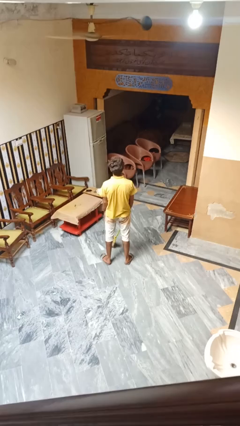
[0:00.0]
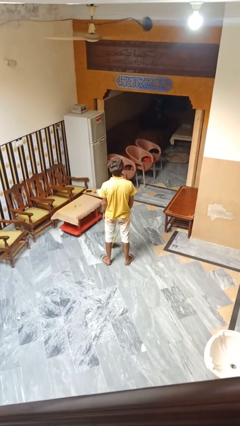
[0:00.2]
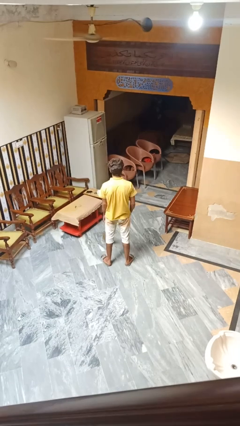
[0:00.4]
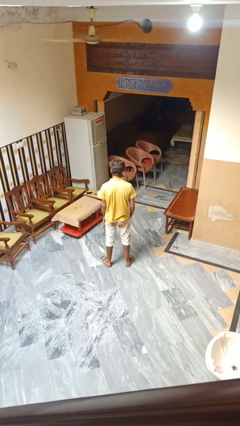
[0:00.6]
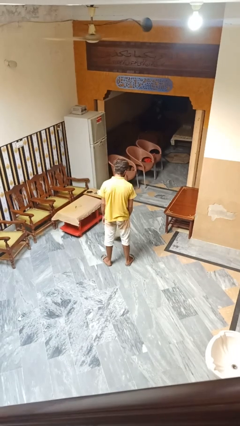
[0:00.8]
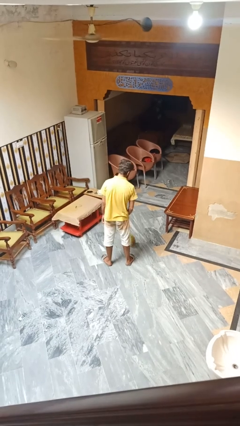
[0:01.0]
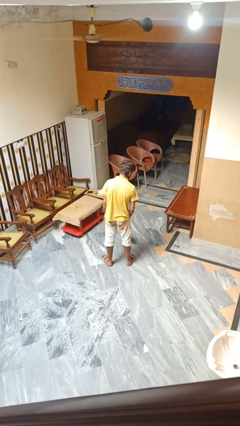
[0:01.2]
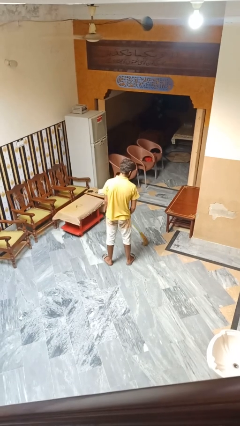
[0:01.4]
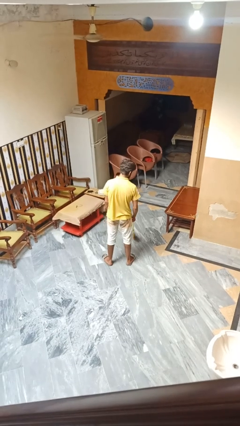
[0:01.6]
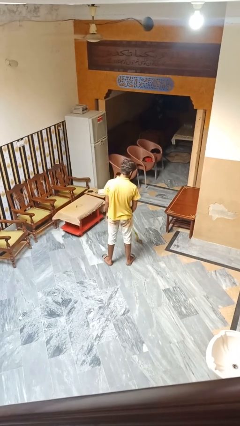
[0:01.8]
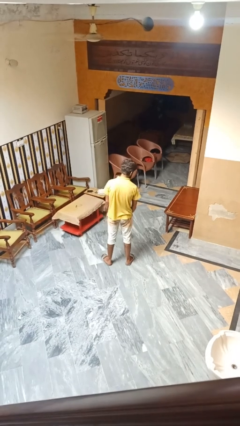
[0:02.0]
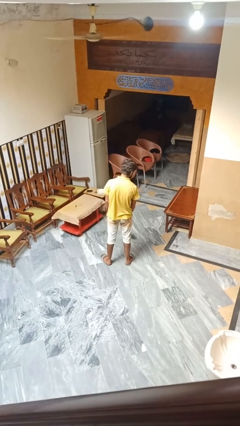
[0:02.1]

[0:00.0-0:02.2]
person mops

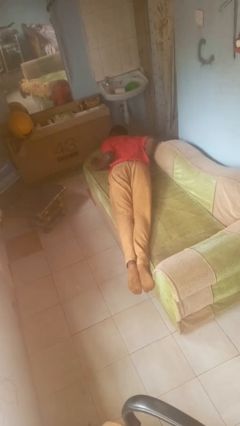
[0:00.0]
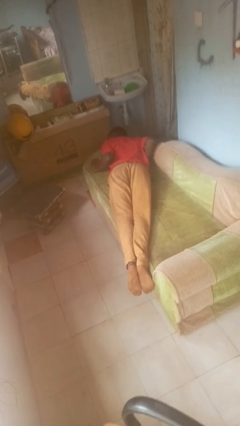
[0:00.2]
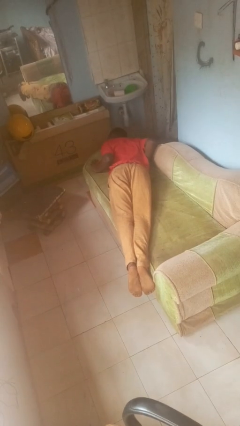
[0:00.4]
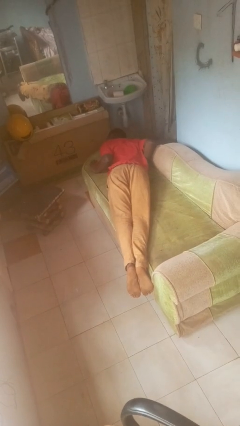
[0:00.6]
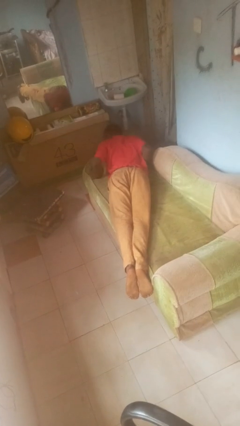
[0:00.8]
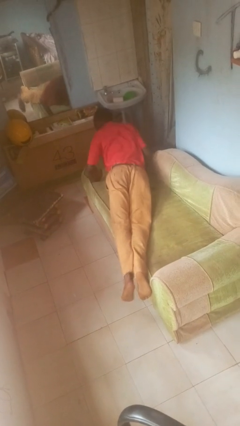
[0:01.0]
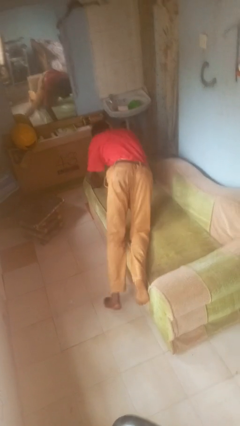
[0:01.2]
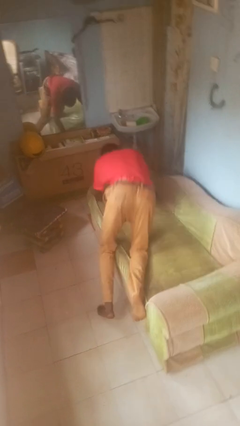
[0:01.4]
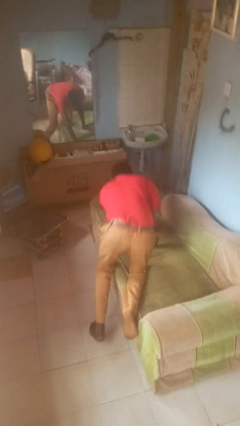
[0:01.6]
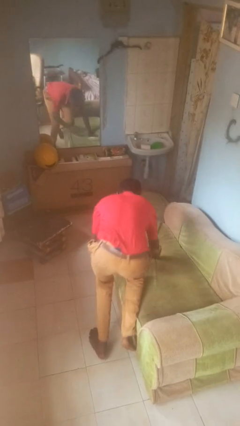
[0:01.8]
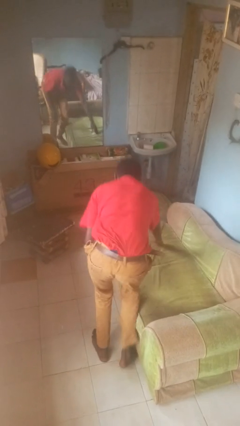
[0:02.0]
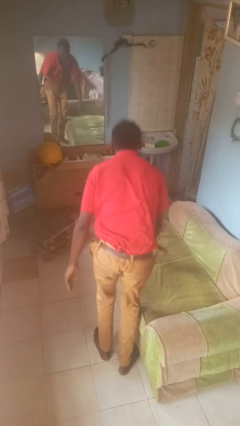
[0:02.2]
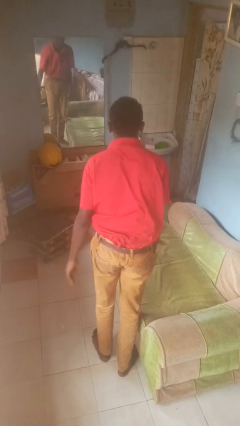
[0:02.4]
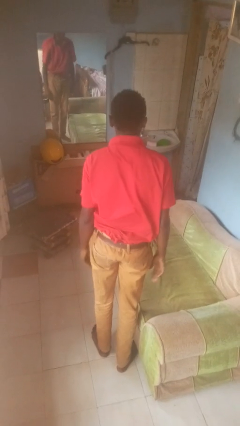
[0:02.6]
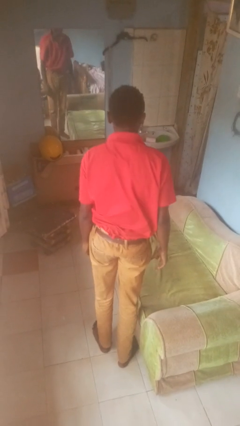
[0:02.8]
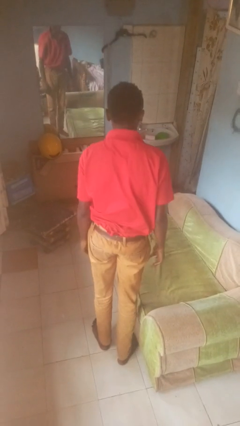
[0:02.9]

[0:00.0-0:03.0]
person stands up

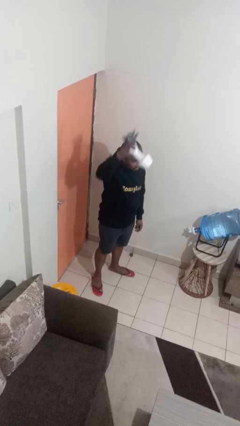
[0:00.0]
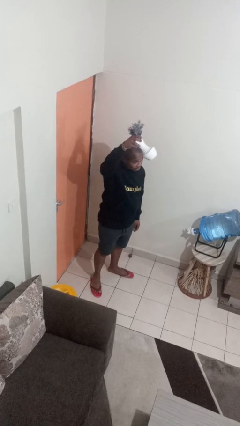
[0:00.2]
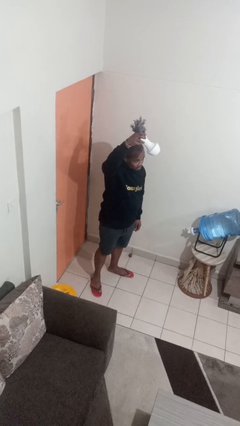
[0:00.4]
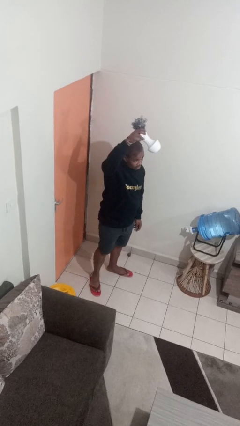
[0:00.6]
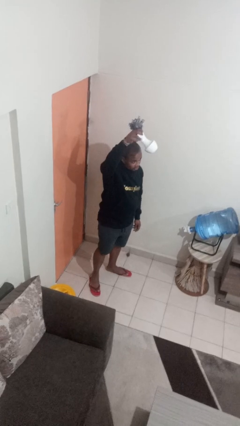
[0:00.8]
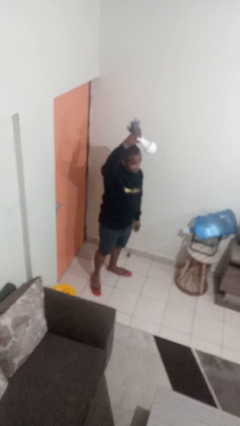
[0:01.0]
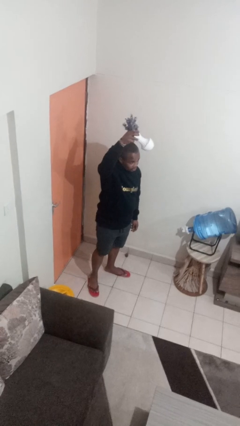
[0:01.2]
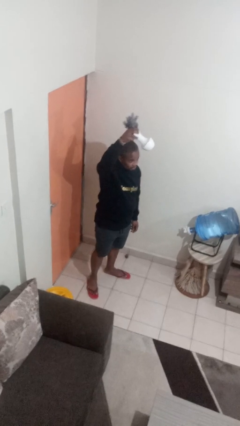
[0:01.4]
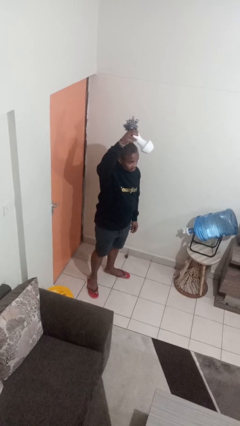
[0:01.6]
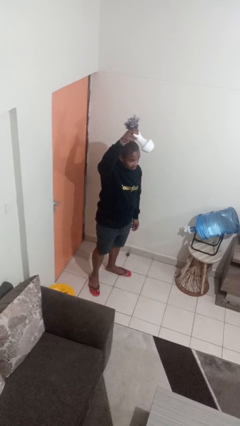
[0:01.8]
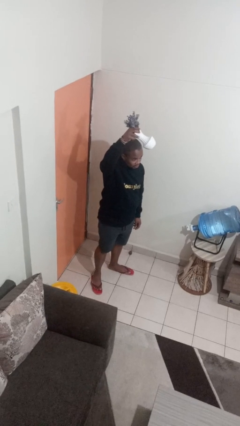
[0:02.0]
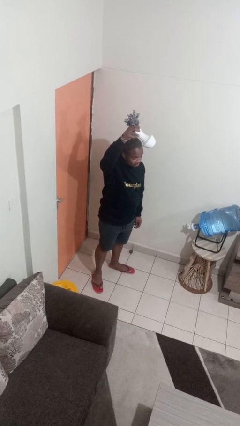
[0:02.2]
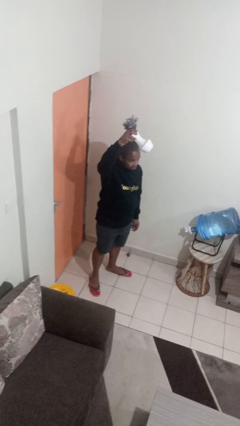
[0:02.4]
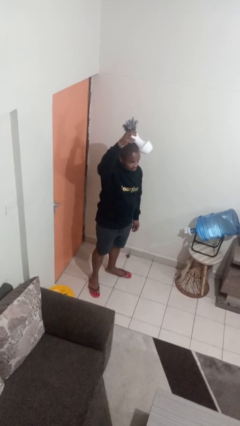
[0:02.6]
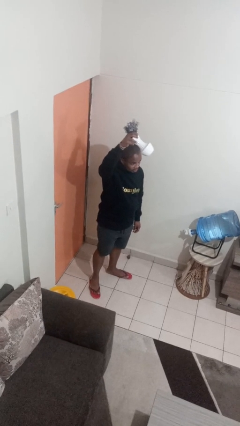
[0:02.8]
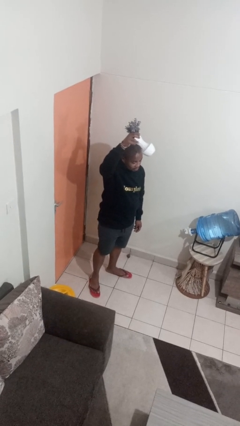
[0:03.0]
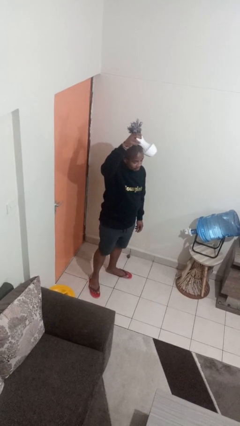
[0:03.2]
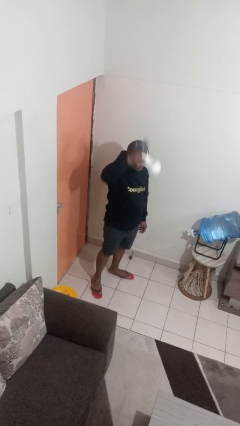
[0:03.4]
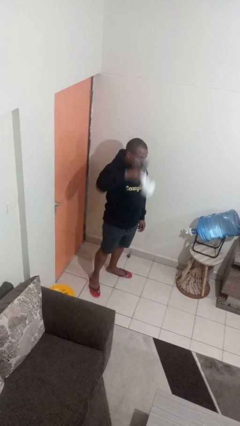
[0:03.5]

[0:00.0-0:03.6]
person holds object above head

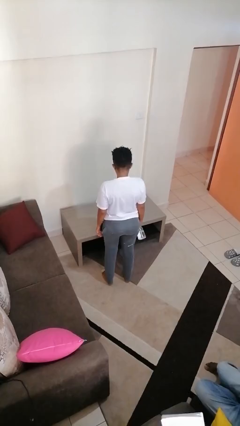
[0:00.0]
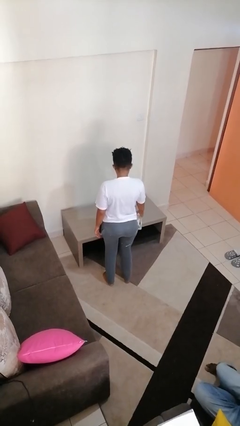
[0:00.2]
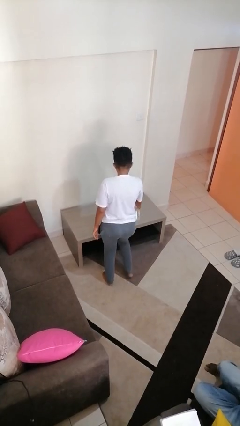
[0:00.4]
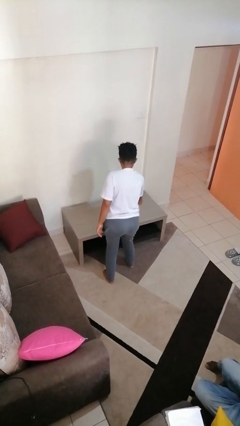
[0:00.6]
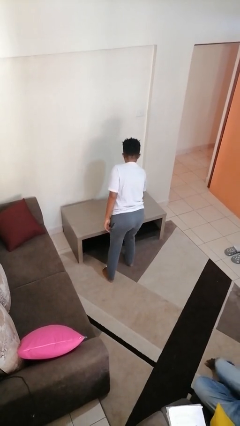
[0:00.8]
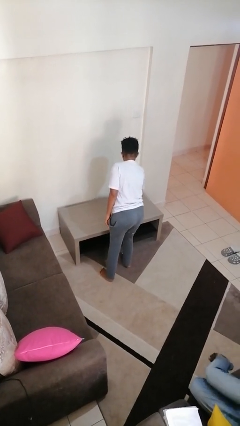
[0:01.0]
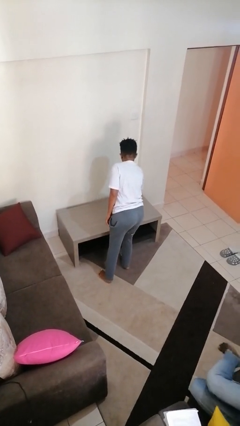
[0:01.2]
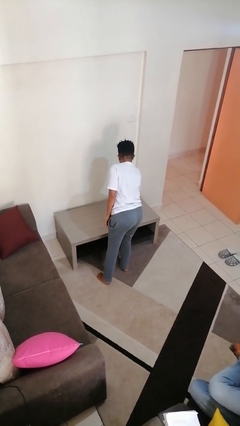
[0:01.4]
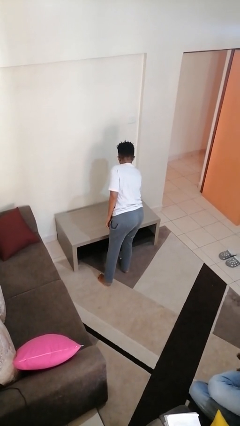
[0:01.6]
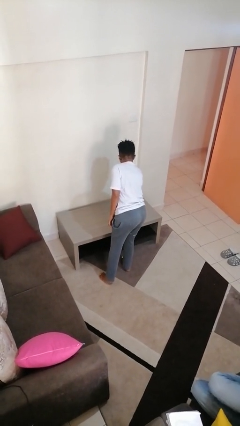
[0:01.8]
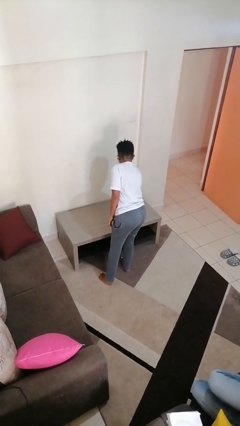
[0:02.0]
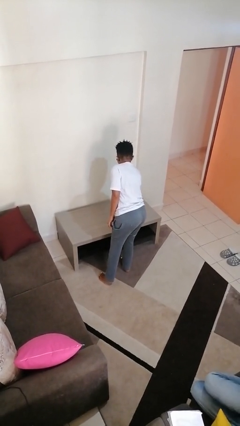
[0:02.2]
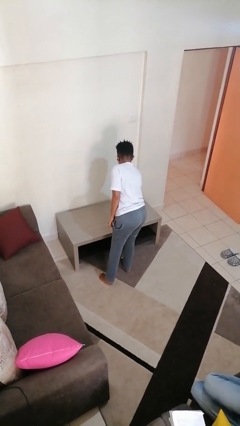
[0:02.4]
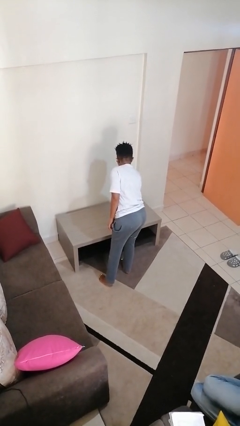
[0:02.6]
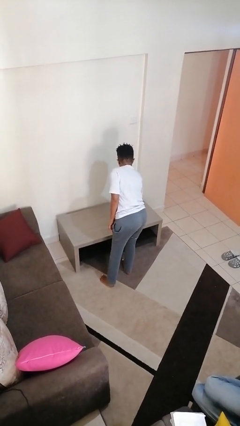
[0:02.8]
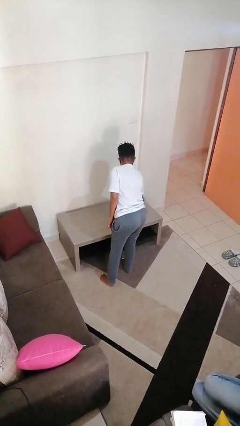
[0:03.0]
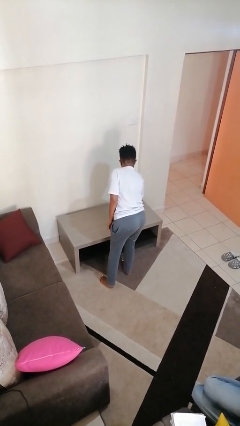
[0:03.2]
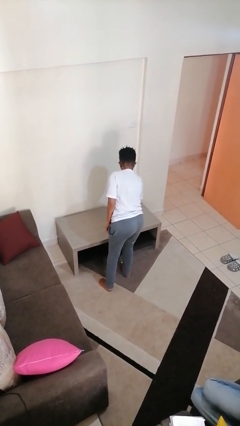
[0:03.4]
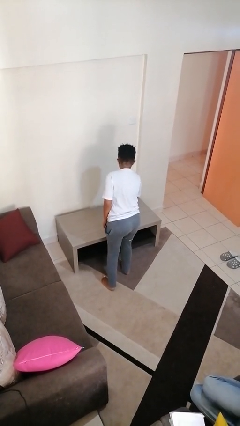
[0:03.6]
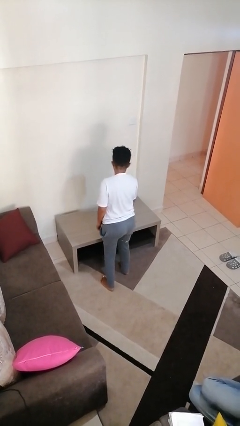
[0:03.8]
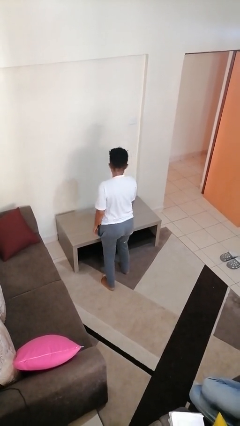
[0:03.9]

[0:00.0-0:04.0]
person sprays from bottle

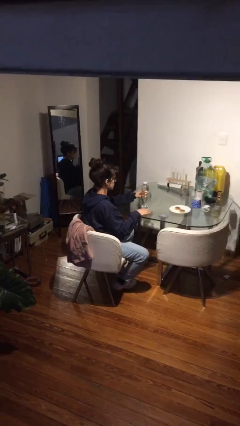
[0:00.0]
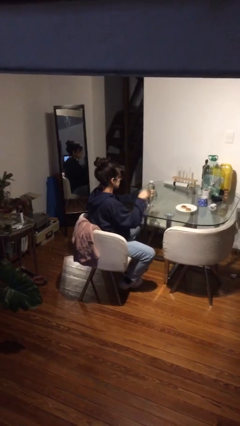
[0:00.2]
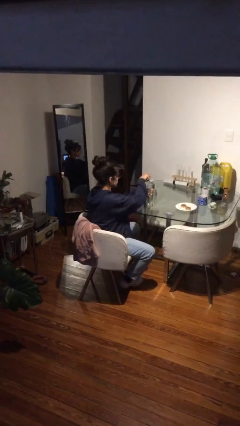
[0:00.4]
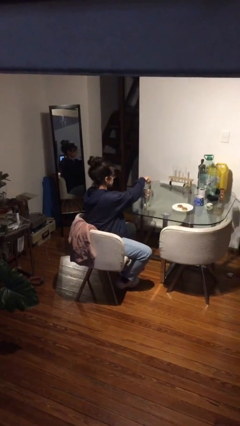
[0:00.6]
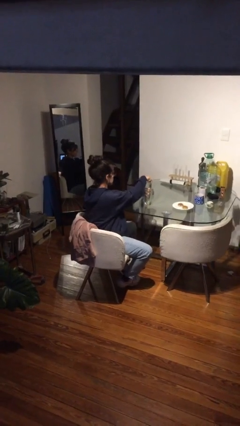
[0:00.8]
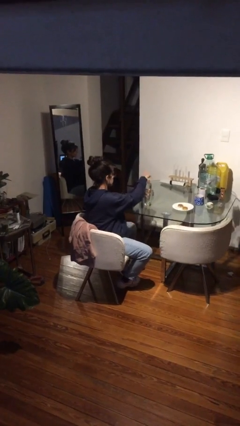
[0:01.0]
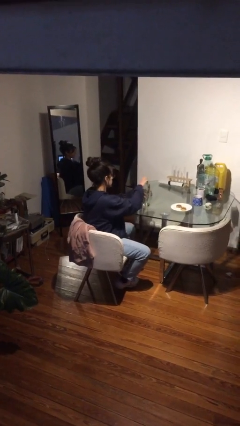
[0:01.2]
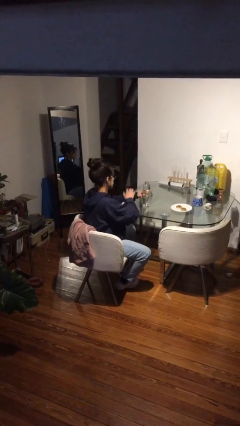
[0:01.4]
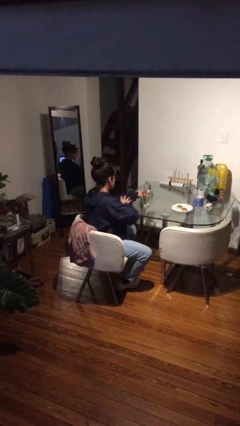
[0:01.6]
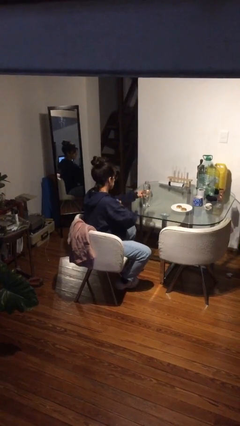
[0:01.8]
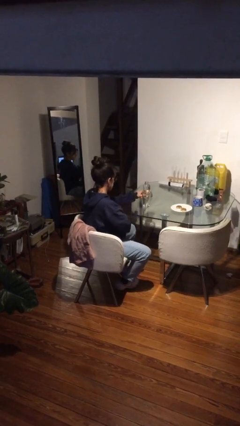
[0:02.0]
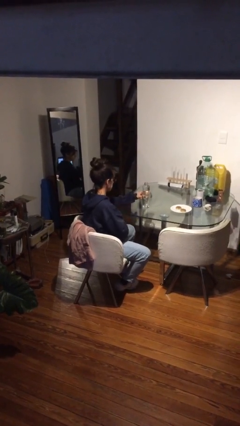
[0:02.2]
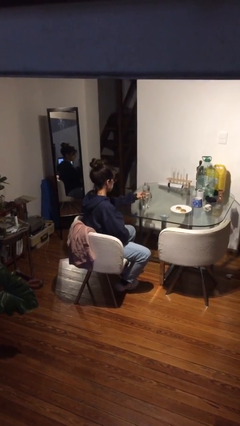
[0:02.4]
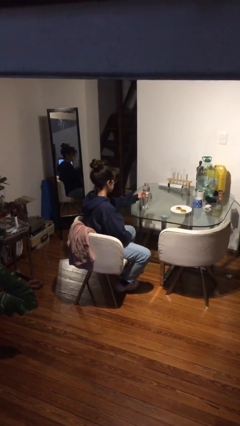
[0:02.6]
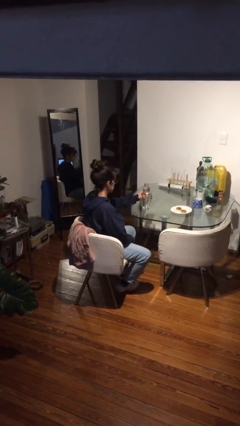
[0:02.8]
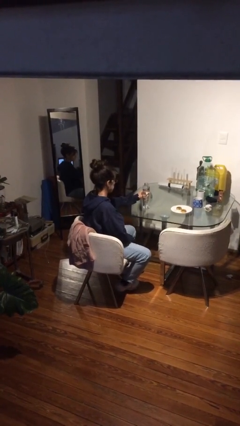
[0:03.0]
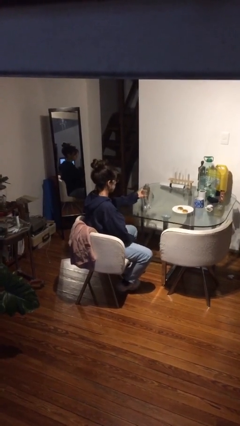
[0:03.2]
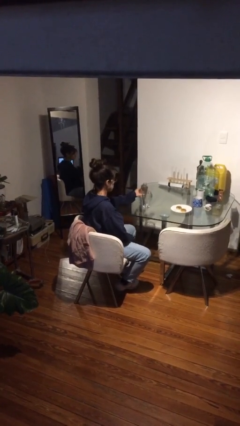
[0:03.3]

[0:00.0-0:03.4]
person unscrews lid from bottle

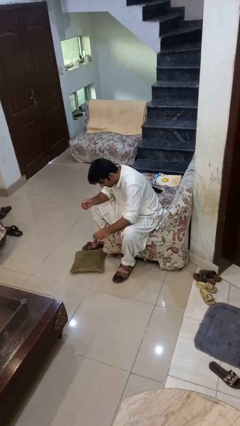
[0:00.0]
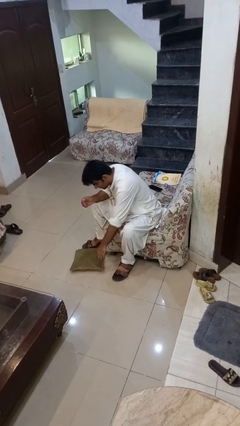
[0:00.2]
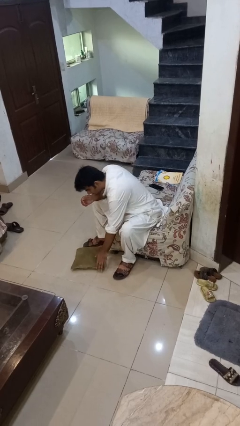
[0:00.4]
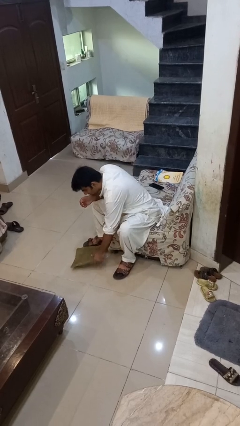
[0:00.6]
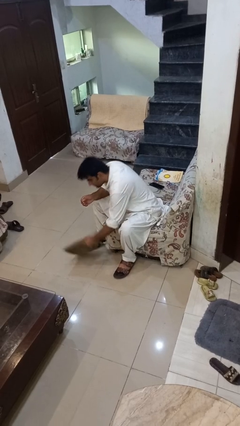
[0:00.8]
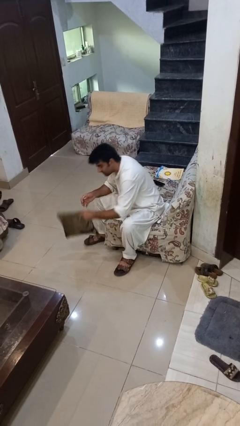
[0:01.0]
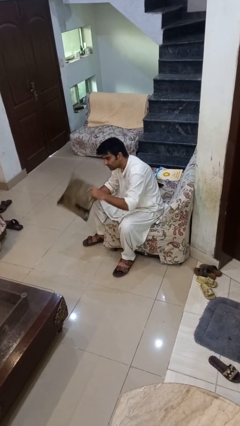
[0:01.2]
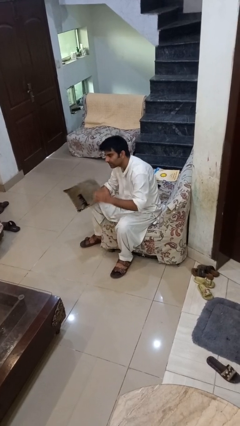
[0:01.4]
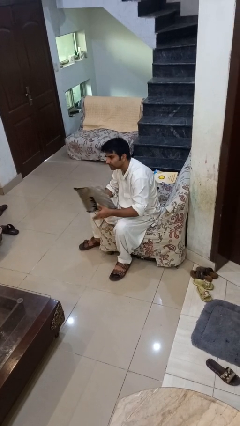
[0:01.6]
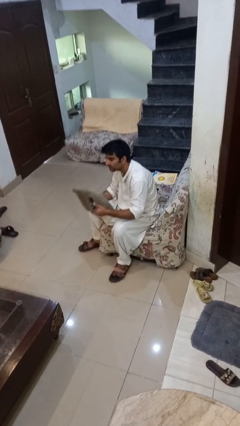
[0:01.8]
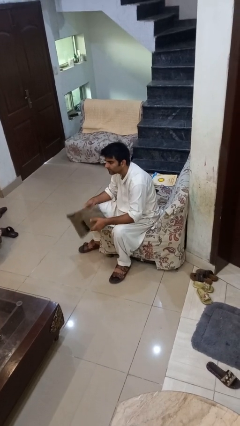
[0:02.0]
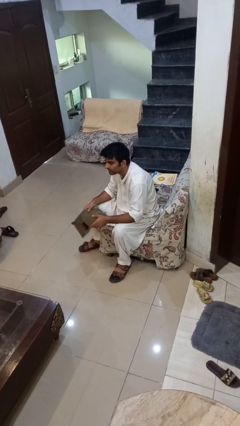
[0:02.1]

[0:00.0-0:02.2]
person picks up object from floor
